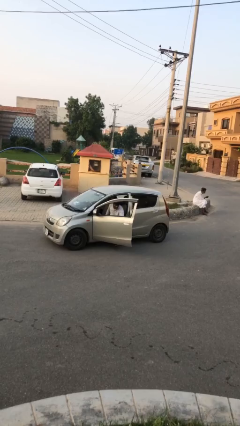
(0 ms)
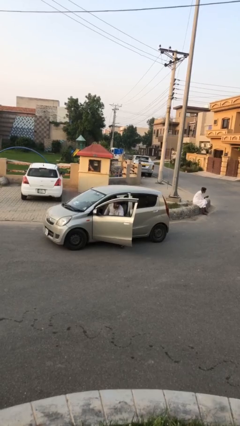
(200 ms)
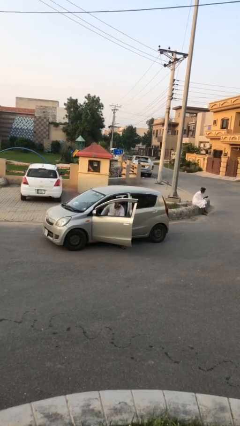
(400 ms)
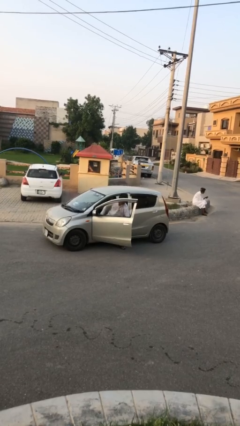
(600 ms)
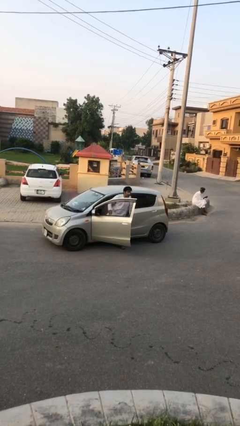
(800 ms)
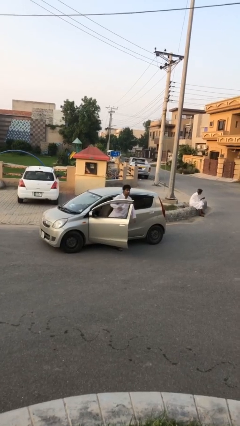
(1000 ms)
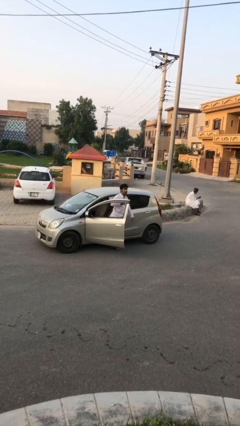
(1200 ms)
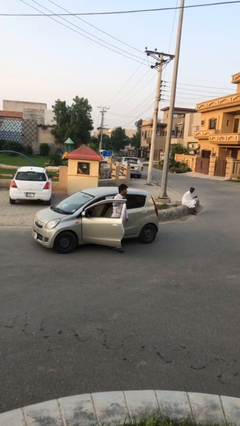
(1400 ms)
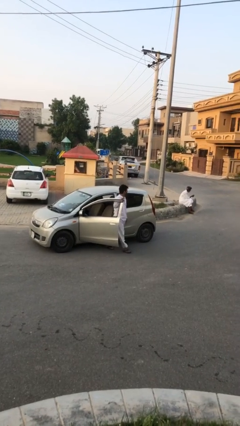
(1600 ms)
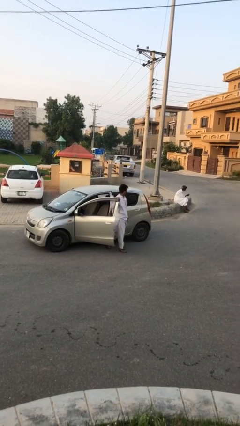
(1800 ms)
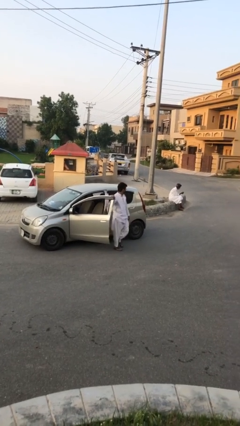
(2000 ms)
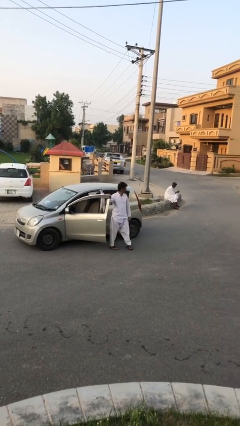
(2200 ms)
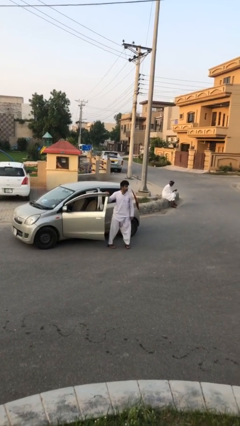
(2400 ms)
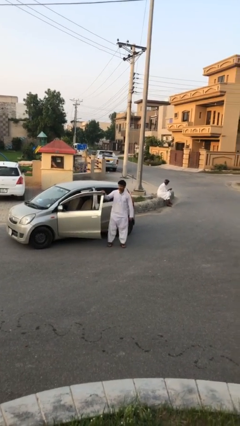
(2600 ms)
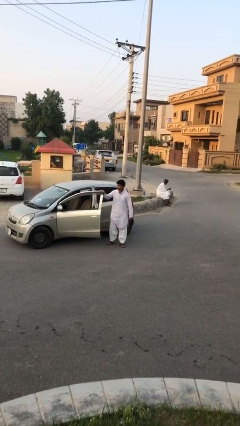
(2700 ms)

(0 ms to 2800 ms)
person exits car

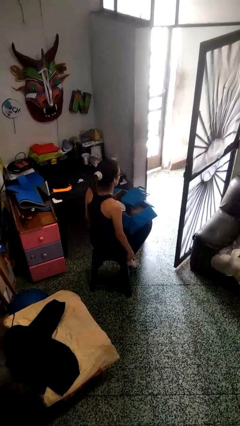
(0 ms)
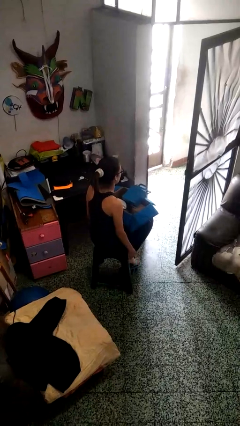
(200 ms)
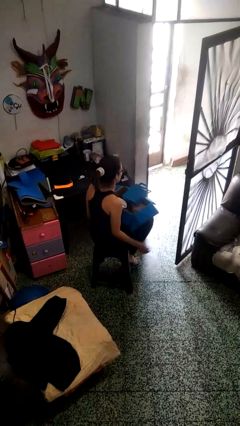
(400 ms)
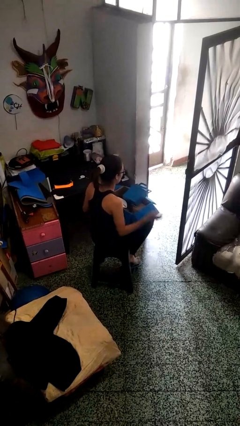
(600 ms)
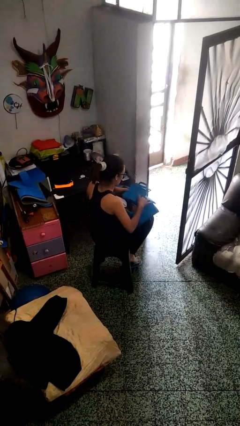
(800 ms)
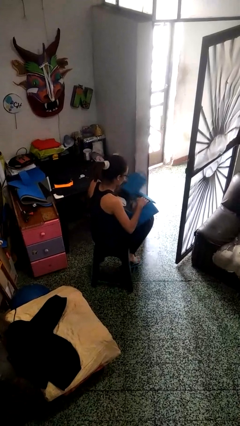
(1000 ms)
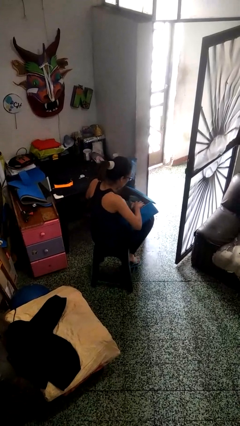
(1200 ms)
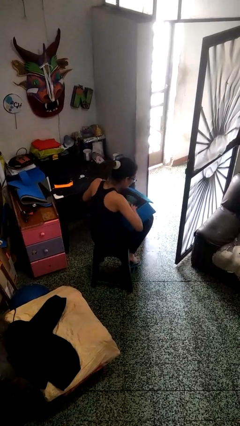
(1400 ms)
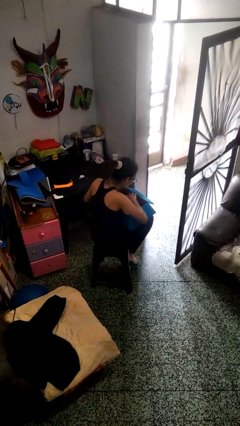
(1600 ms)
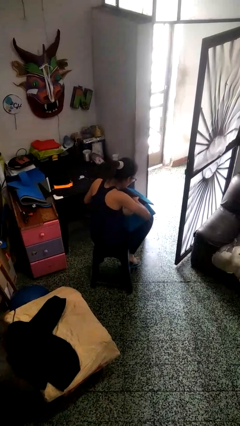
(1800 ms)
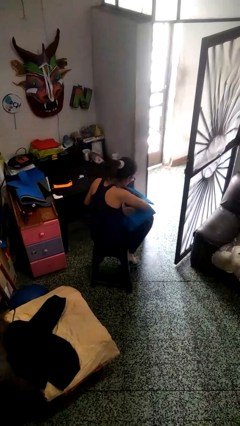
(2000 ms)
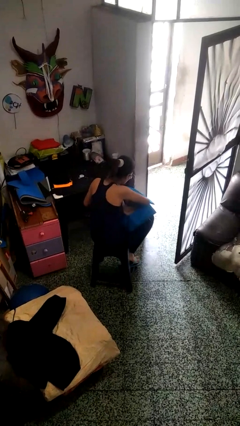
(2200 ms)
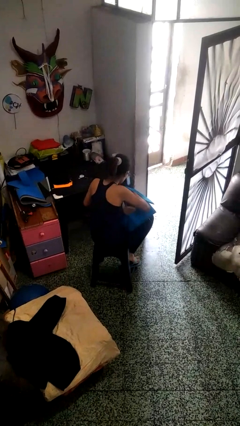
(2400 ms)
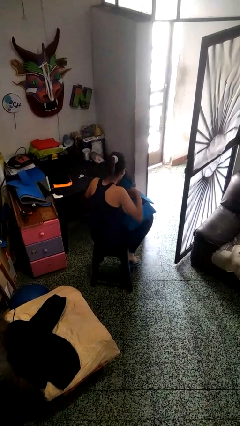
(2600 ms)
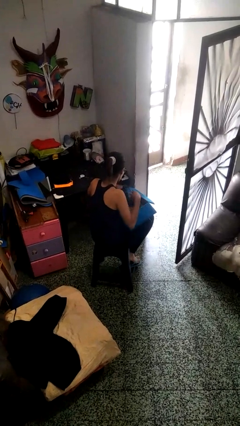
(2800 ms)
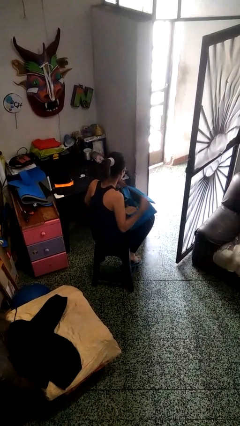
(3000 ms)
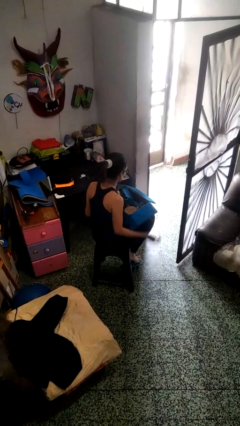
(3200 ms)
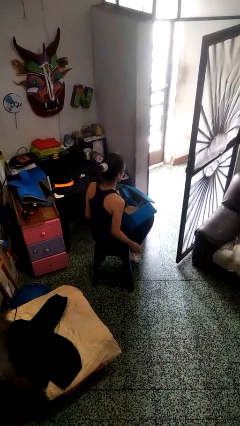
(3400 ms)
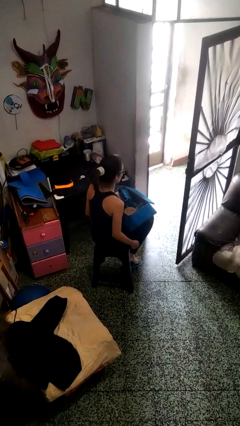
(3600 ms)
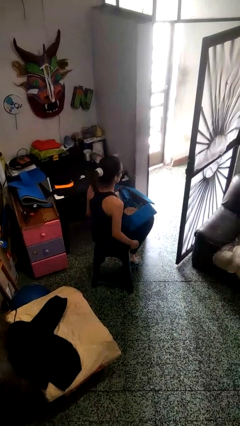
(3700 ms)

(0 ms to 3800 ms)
person searches in box

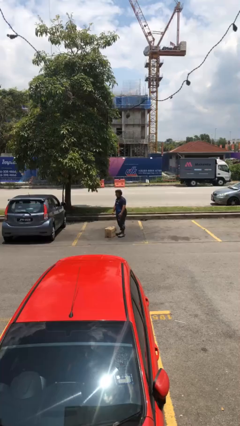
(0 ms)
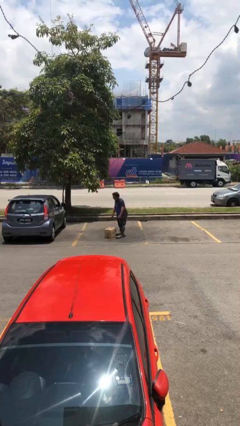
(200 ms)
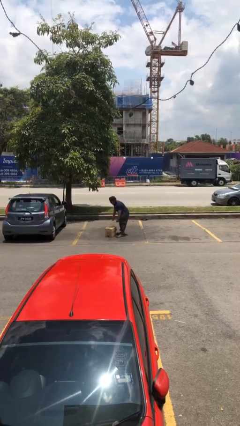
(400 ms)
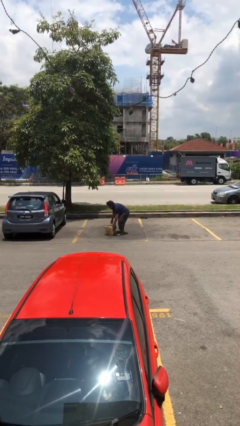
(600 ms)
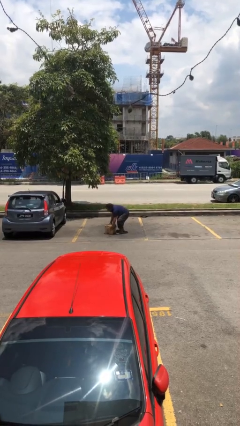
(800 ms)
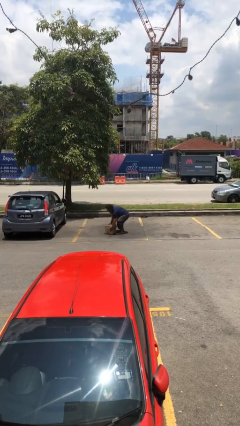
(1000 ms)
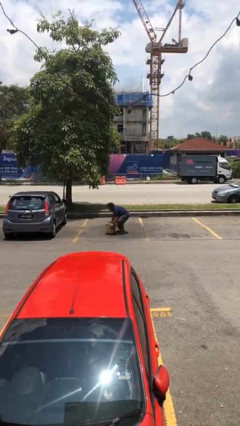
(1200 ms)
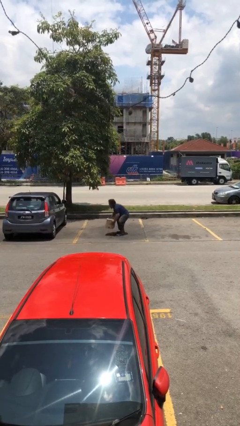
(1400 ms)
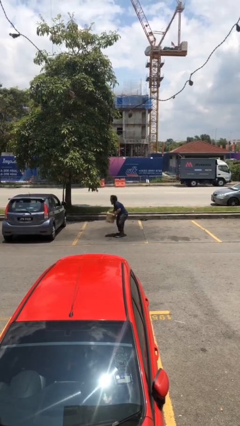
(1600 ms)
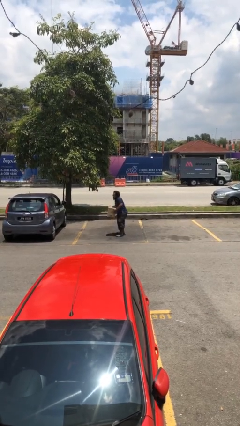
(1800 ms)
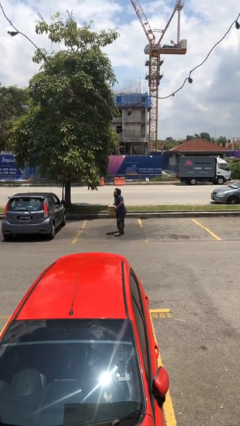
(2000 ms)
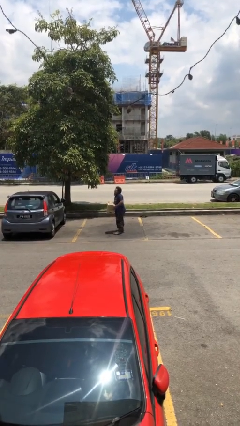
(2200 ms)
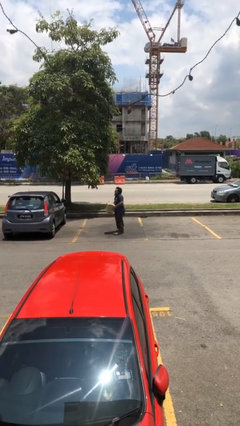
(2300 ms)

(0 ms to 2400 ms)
person picks up object from floor

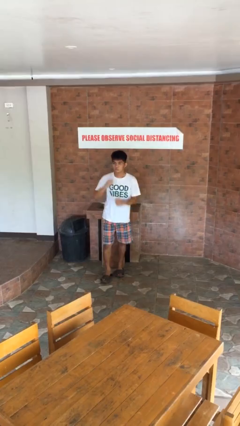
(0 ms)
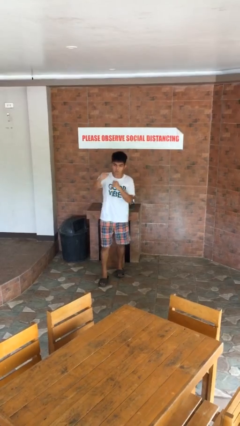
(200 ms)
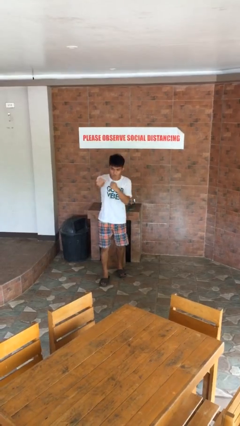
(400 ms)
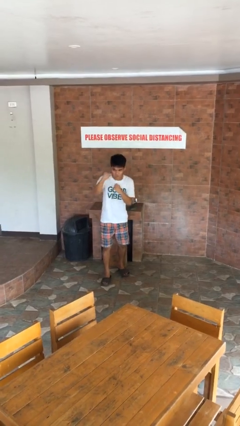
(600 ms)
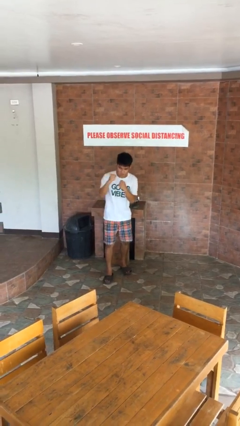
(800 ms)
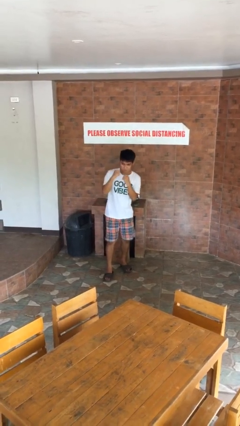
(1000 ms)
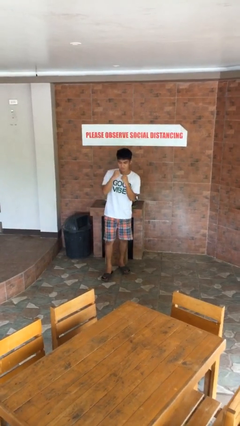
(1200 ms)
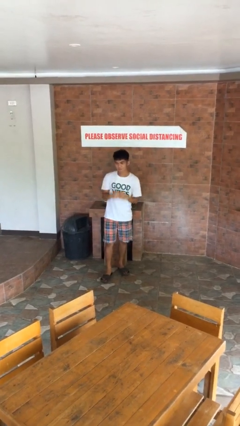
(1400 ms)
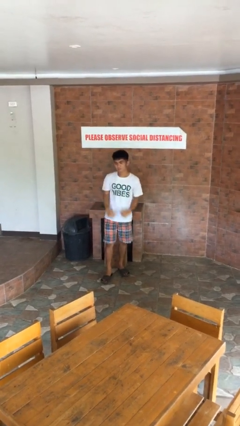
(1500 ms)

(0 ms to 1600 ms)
person punches

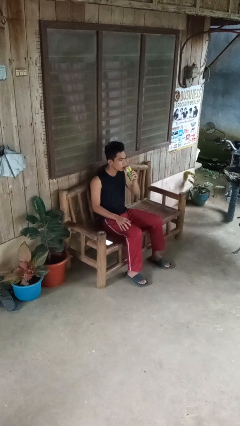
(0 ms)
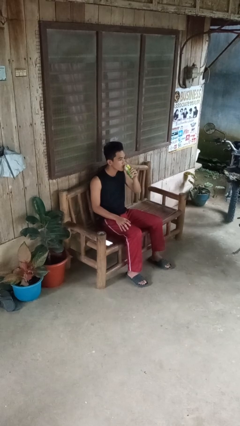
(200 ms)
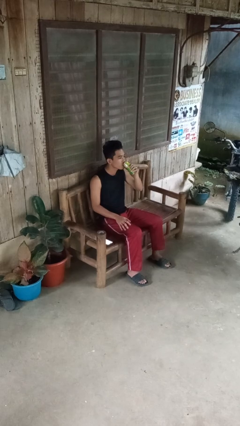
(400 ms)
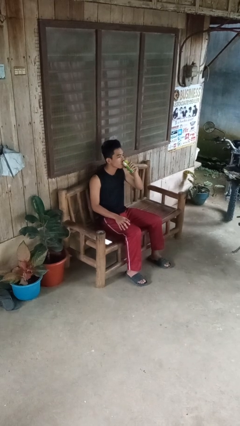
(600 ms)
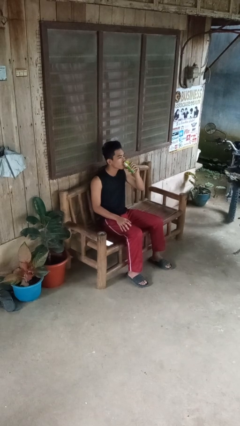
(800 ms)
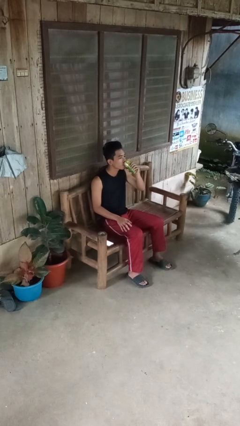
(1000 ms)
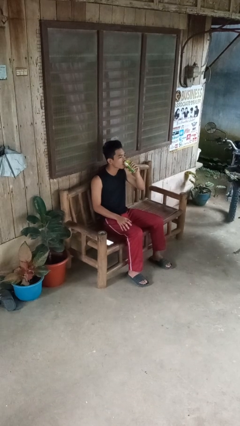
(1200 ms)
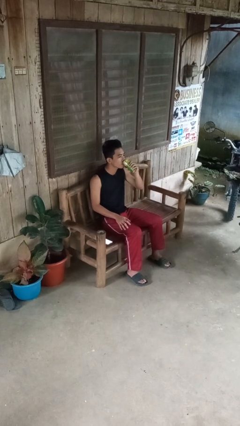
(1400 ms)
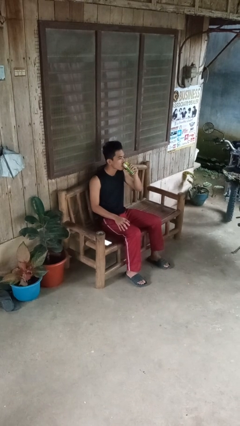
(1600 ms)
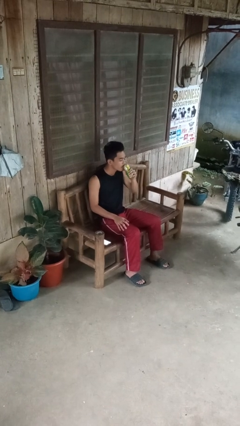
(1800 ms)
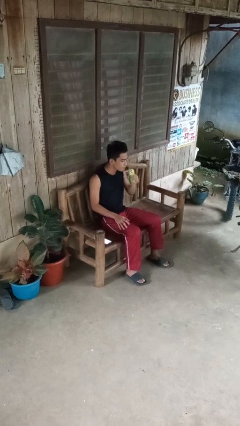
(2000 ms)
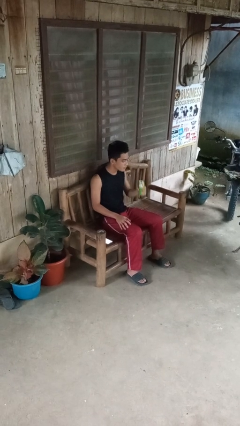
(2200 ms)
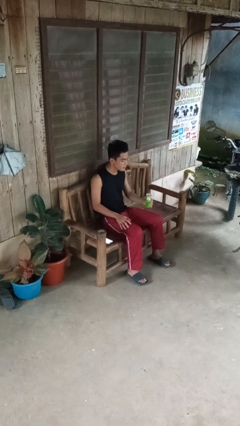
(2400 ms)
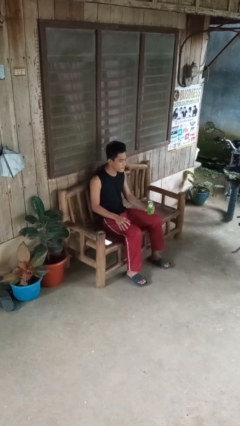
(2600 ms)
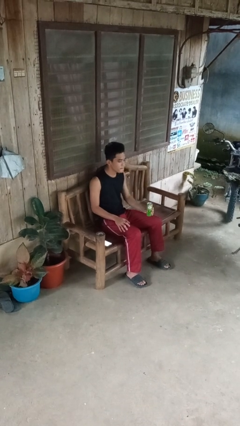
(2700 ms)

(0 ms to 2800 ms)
person drinks from beverage can

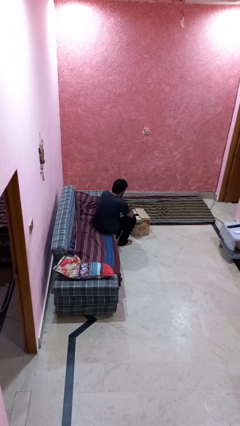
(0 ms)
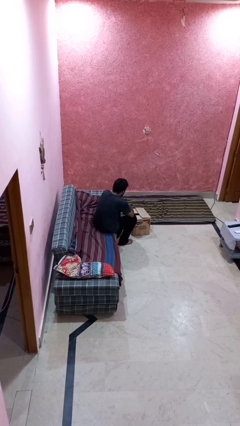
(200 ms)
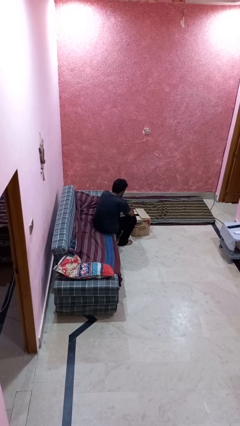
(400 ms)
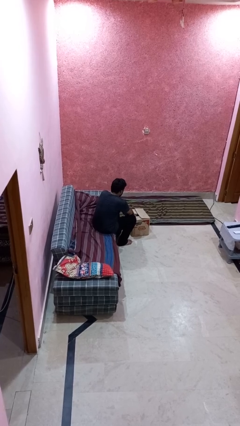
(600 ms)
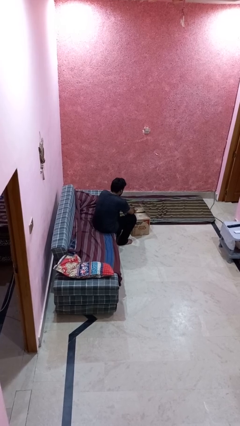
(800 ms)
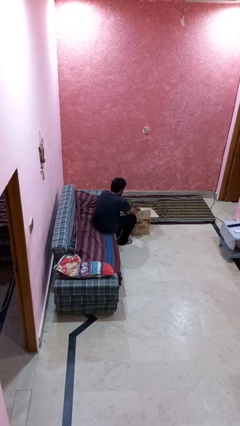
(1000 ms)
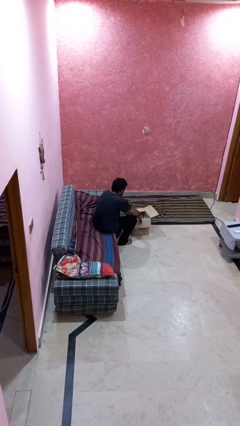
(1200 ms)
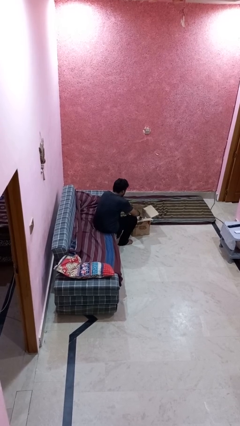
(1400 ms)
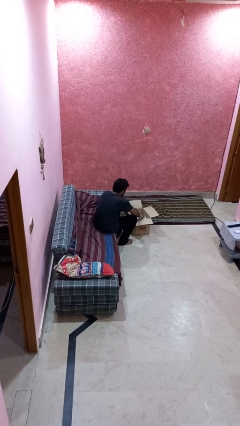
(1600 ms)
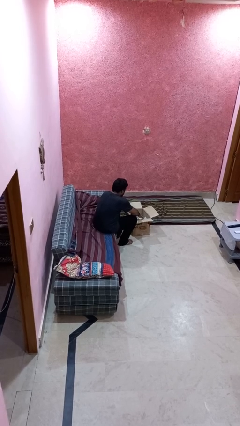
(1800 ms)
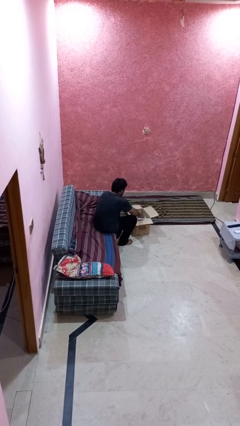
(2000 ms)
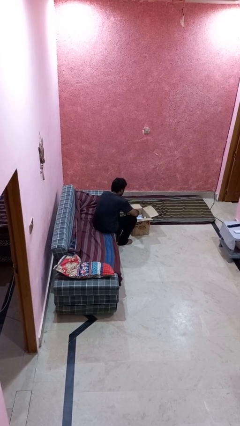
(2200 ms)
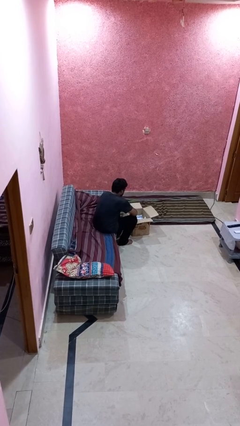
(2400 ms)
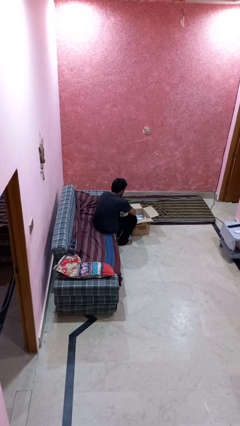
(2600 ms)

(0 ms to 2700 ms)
person opens box

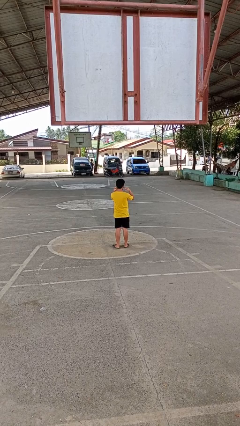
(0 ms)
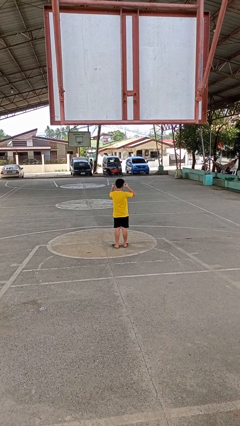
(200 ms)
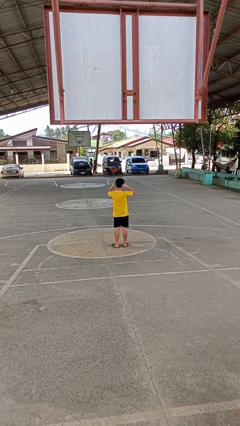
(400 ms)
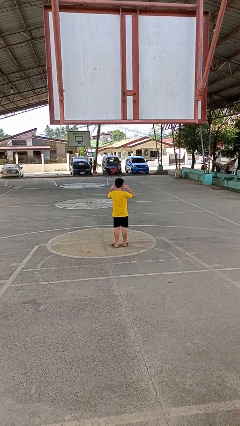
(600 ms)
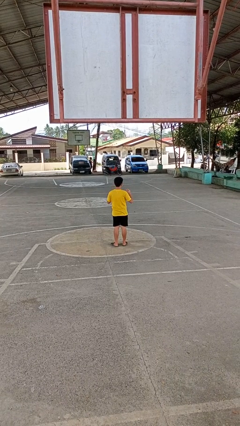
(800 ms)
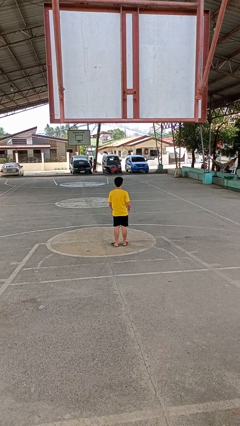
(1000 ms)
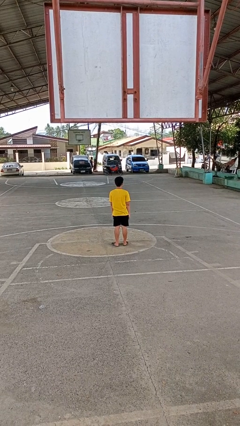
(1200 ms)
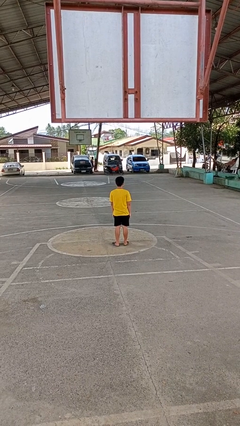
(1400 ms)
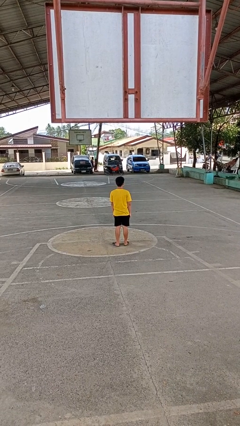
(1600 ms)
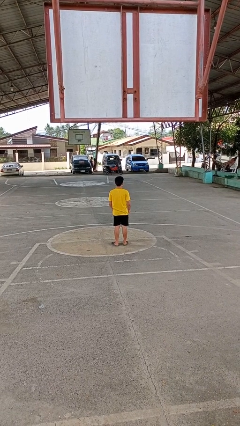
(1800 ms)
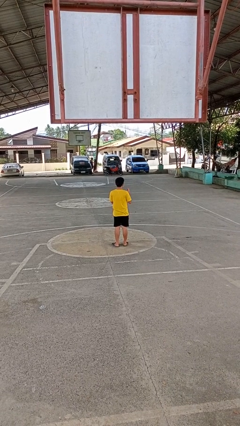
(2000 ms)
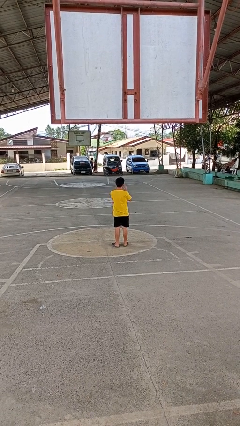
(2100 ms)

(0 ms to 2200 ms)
person puts on facemask
